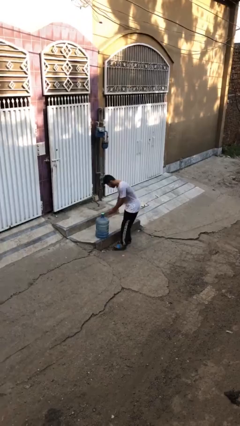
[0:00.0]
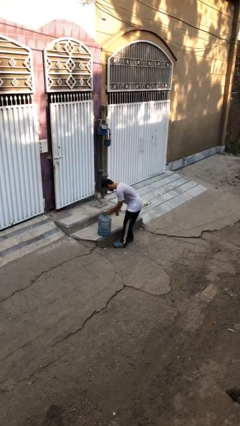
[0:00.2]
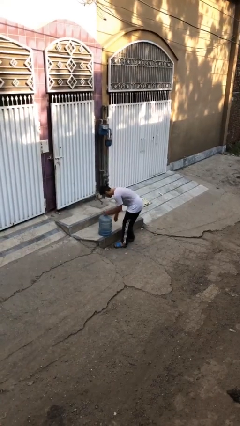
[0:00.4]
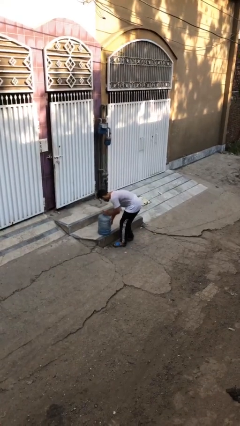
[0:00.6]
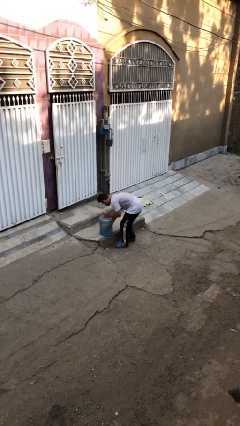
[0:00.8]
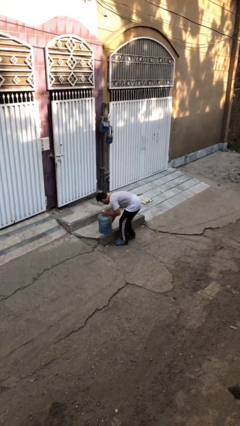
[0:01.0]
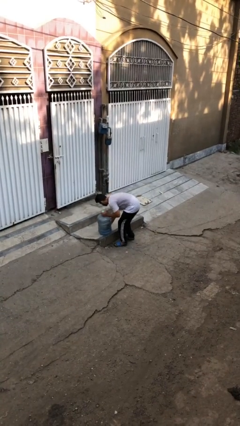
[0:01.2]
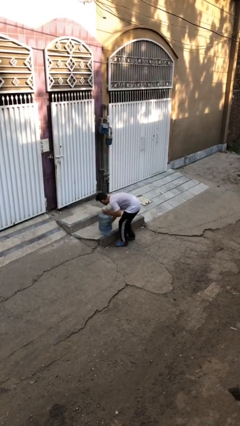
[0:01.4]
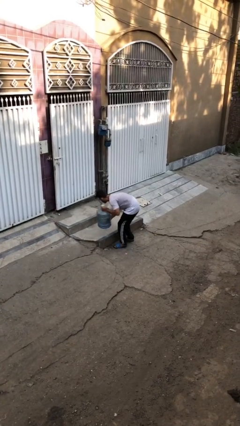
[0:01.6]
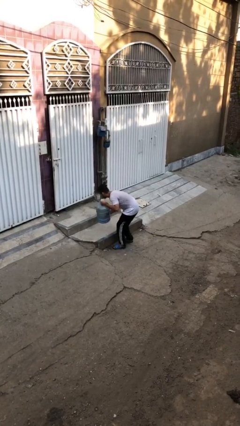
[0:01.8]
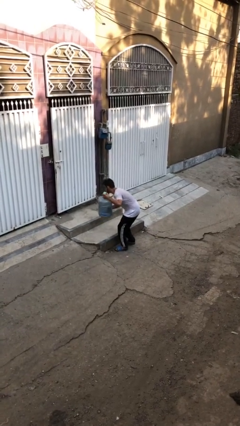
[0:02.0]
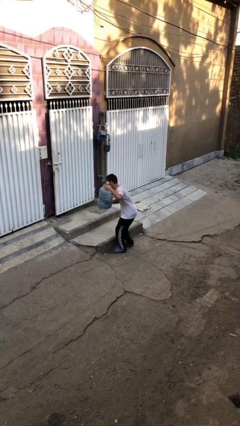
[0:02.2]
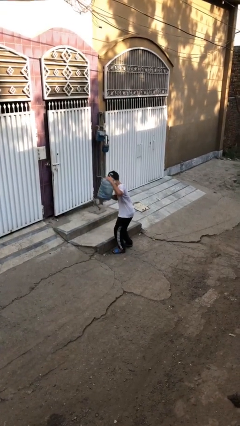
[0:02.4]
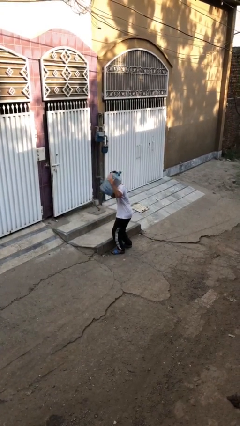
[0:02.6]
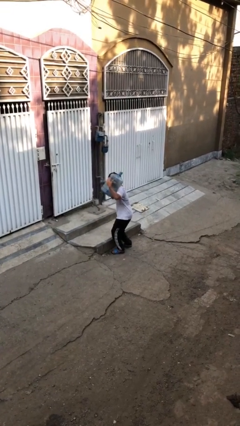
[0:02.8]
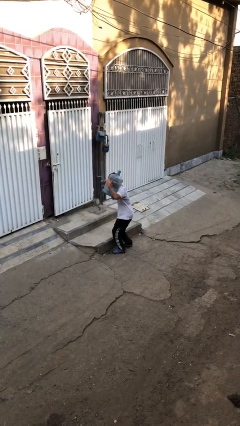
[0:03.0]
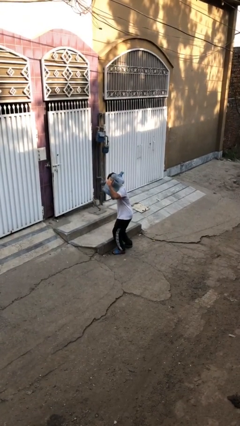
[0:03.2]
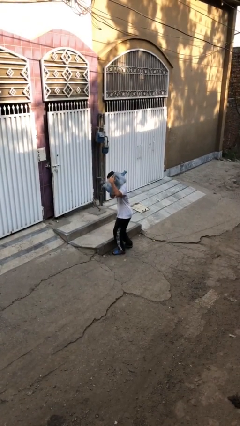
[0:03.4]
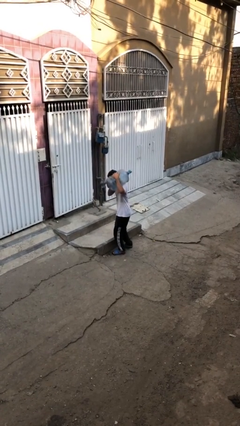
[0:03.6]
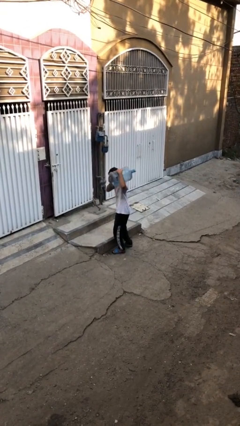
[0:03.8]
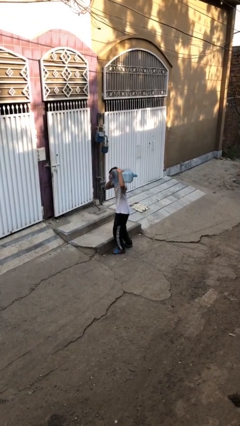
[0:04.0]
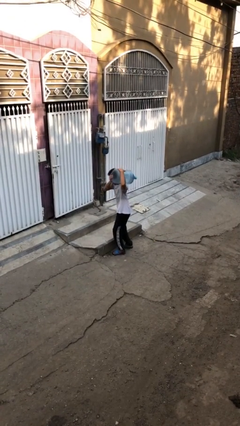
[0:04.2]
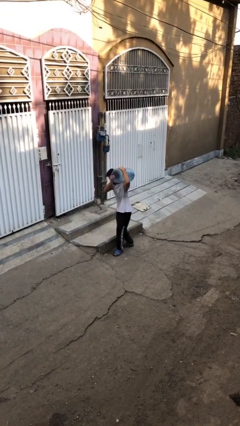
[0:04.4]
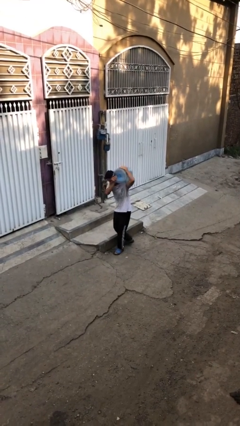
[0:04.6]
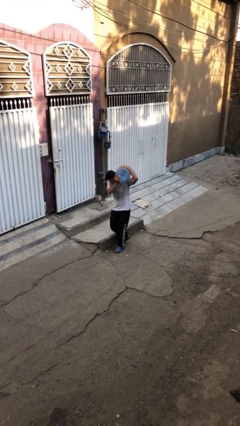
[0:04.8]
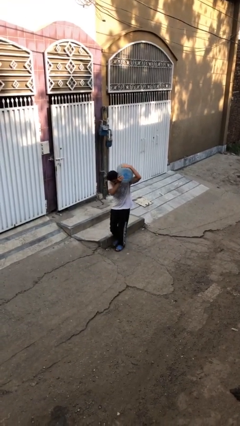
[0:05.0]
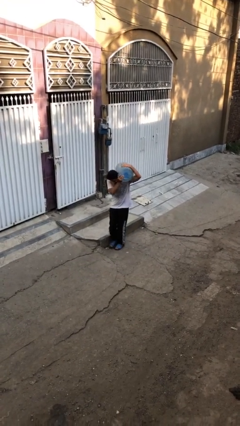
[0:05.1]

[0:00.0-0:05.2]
person picks up object from floor

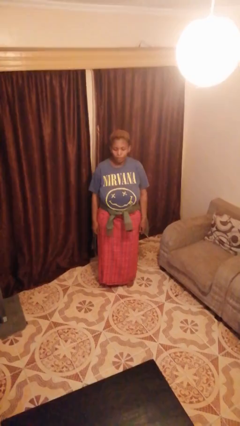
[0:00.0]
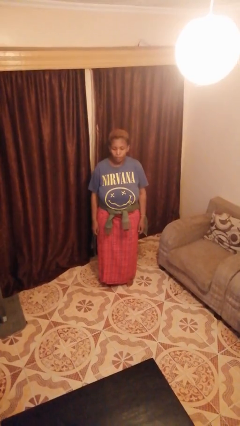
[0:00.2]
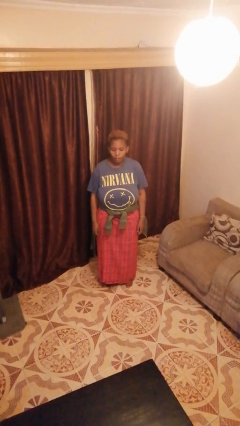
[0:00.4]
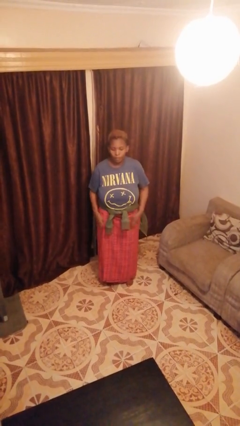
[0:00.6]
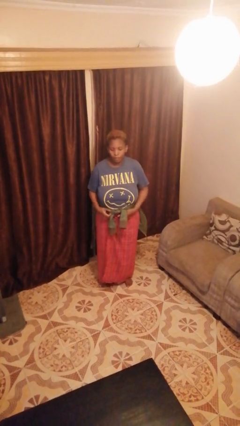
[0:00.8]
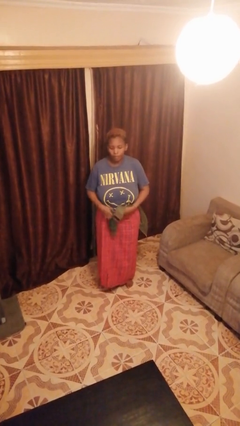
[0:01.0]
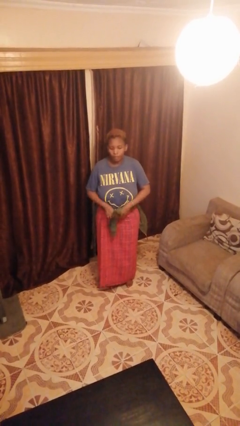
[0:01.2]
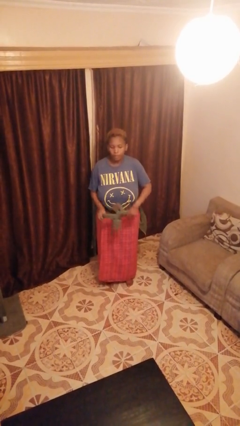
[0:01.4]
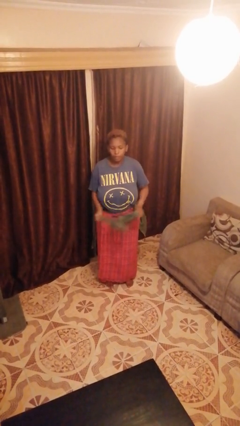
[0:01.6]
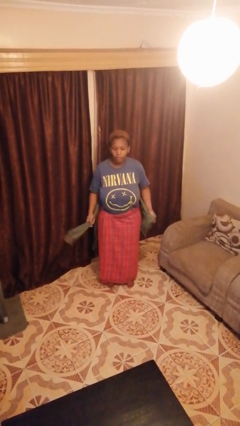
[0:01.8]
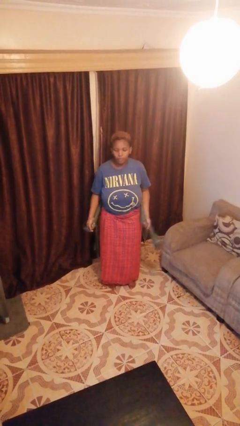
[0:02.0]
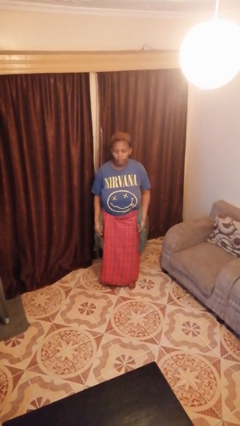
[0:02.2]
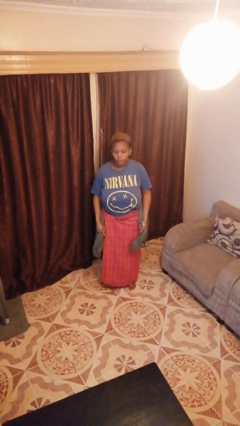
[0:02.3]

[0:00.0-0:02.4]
person unties jacket around waist

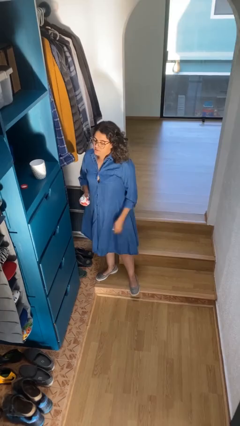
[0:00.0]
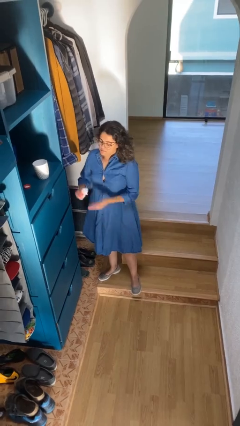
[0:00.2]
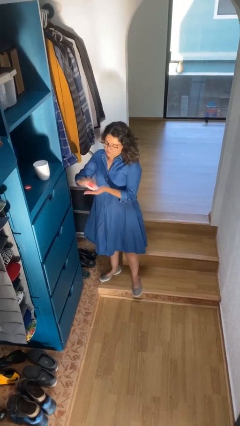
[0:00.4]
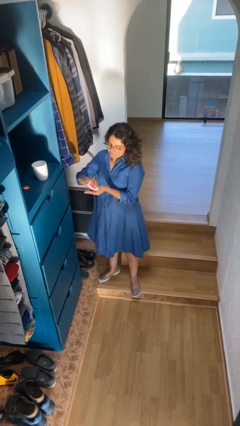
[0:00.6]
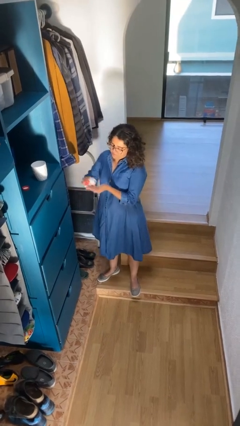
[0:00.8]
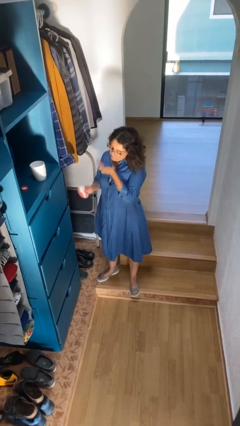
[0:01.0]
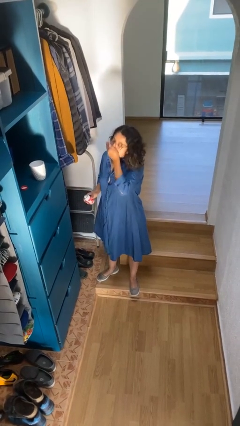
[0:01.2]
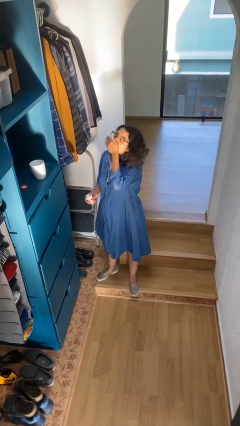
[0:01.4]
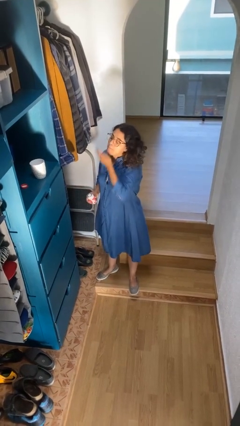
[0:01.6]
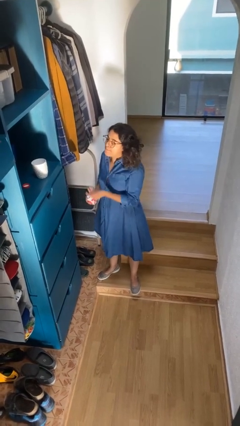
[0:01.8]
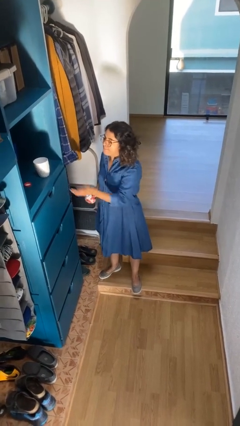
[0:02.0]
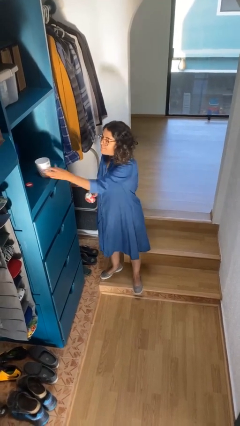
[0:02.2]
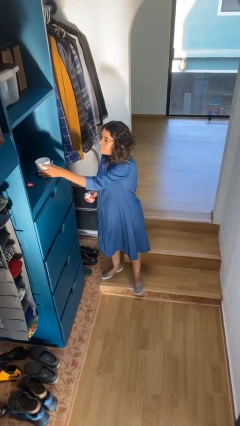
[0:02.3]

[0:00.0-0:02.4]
person takes medicine pills

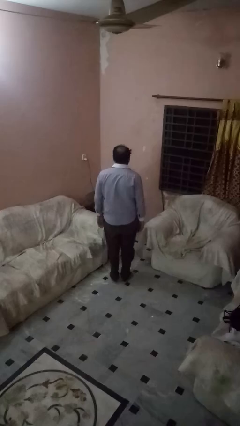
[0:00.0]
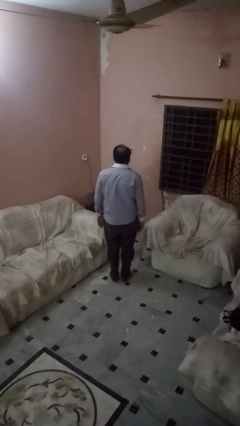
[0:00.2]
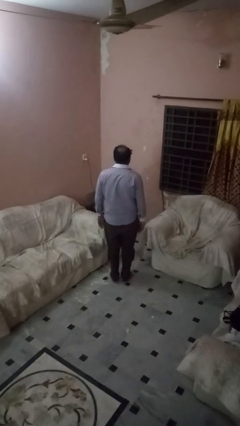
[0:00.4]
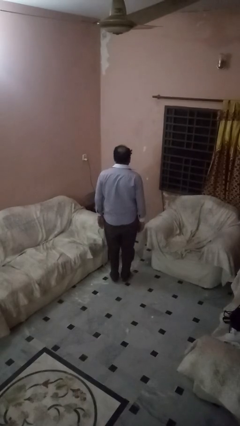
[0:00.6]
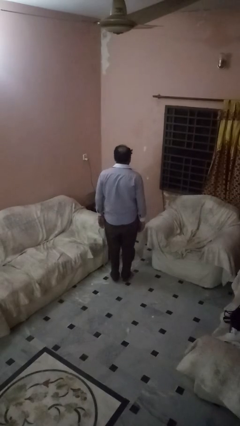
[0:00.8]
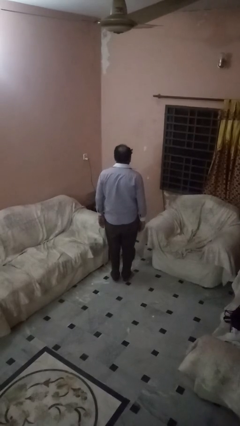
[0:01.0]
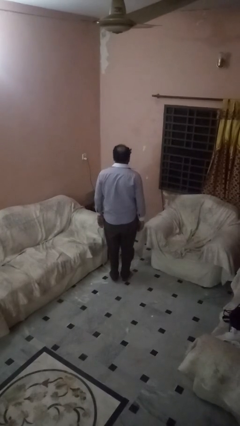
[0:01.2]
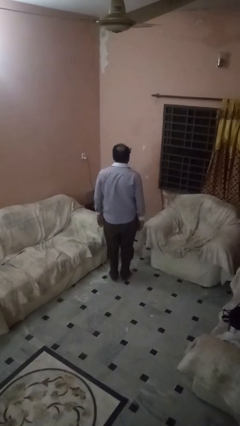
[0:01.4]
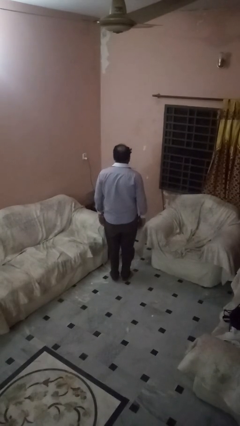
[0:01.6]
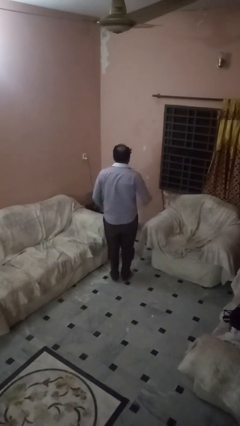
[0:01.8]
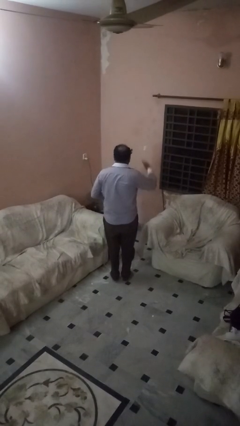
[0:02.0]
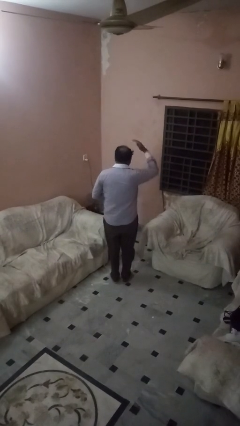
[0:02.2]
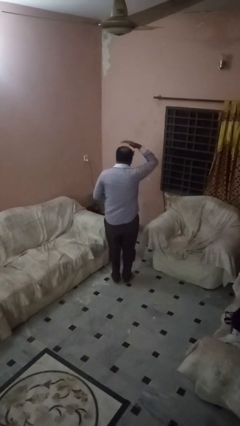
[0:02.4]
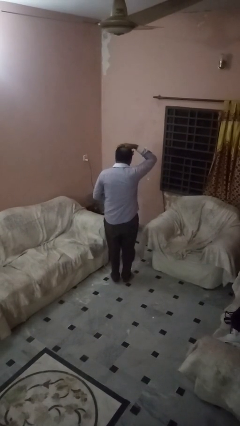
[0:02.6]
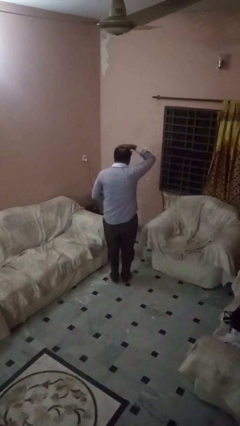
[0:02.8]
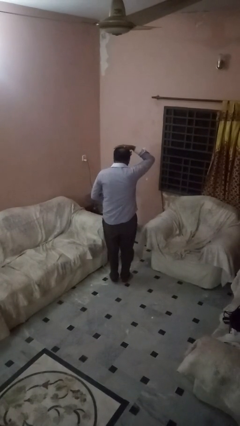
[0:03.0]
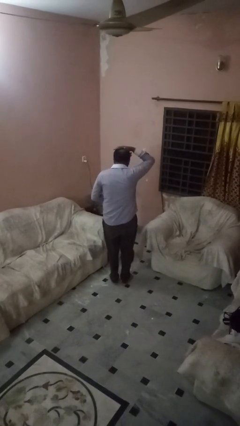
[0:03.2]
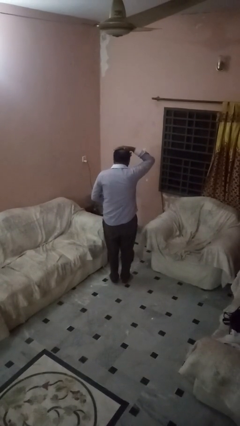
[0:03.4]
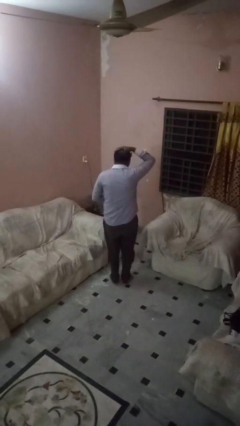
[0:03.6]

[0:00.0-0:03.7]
person pats head

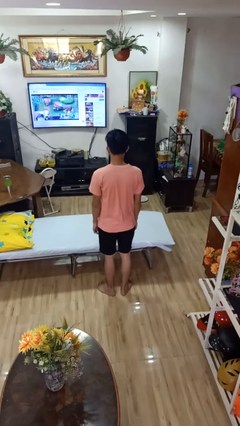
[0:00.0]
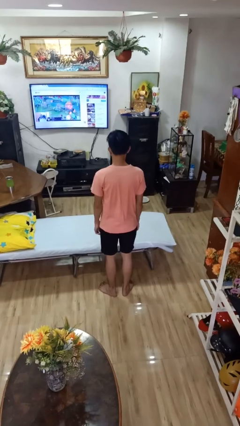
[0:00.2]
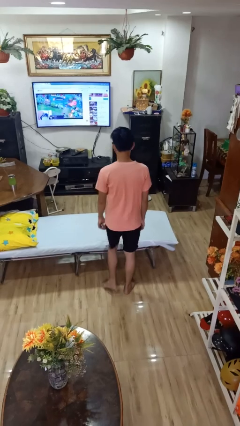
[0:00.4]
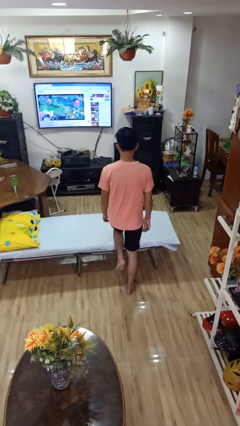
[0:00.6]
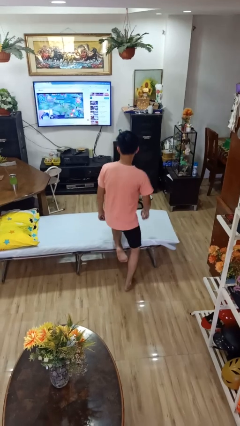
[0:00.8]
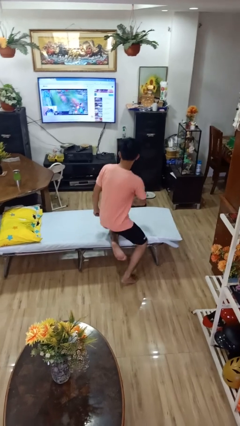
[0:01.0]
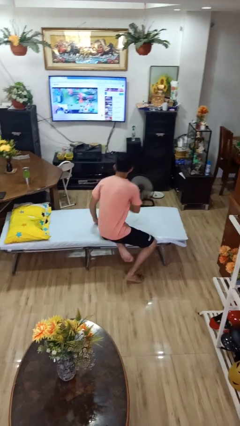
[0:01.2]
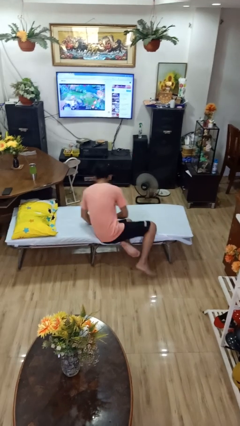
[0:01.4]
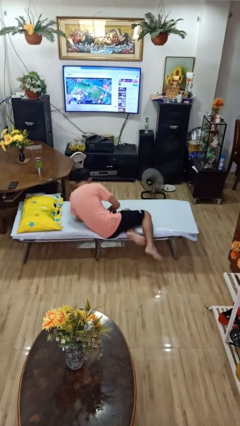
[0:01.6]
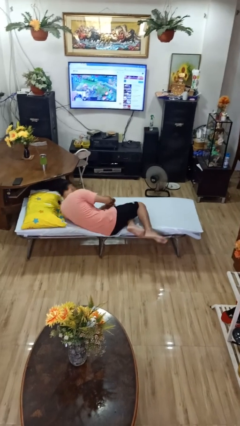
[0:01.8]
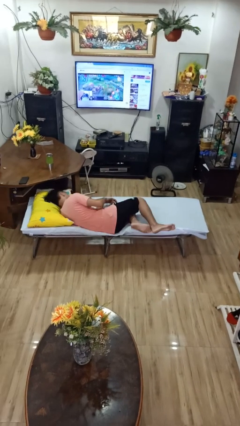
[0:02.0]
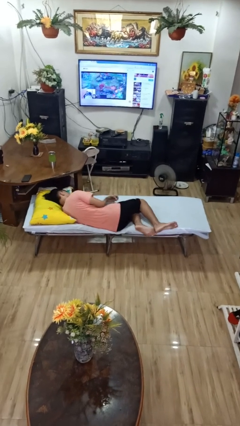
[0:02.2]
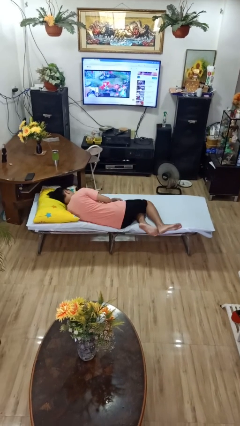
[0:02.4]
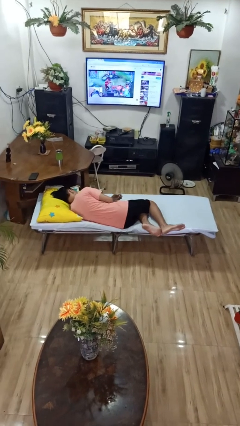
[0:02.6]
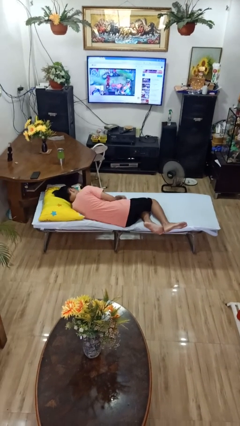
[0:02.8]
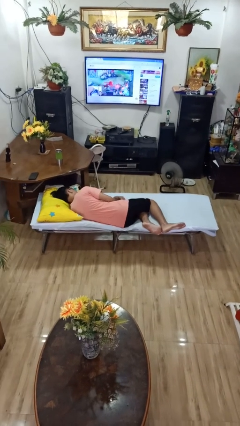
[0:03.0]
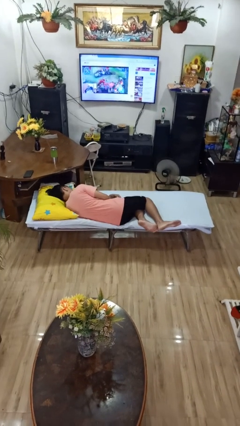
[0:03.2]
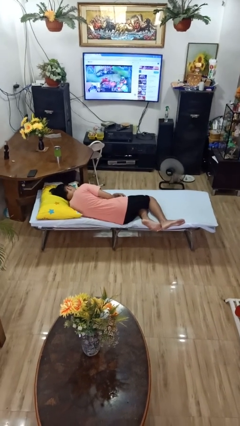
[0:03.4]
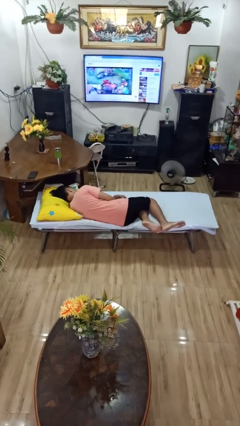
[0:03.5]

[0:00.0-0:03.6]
person lies down on bed

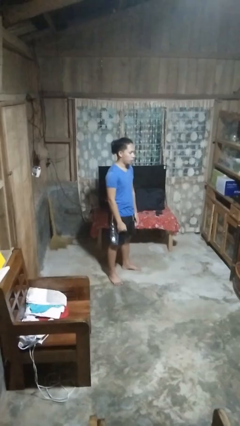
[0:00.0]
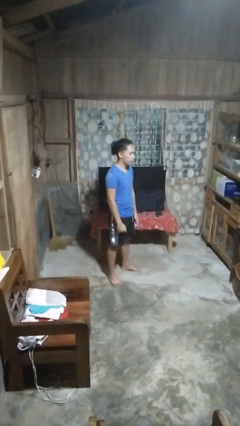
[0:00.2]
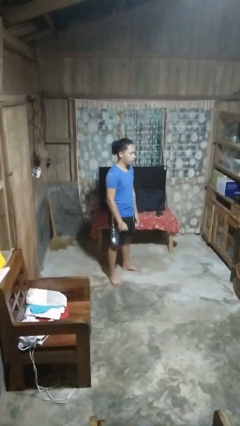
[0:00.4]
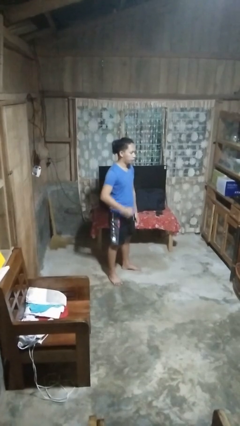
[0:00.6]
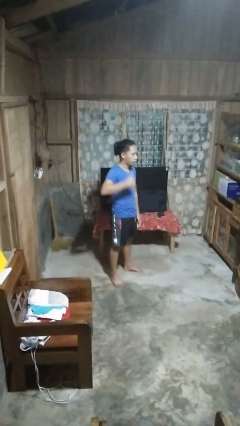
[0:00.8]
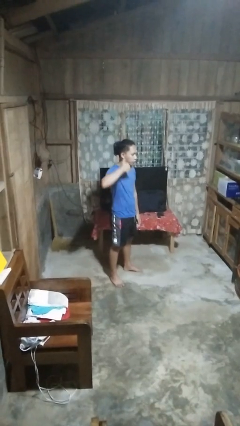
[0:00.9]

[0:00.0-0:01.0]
person gestures call me
